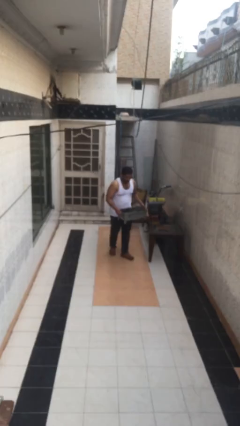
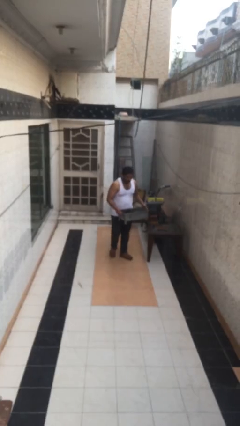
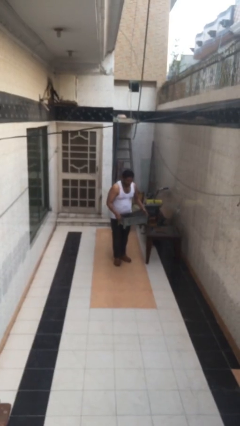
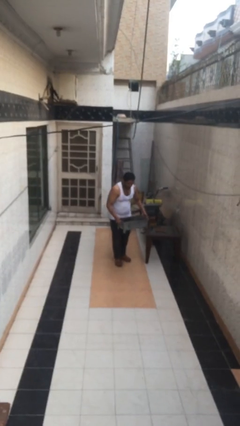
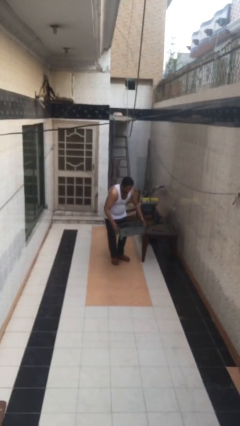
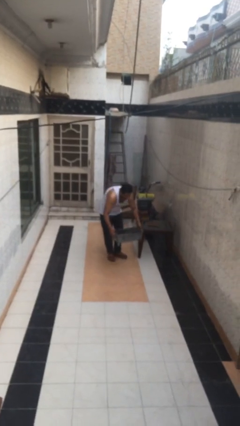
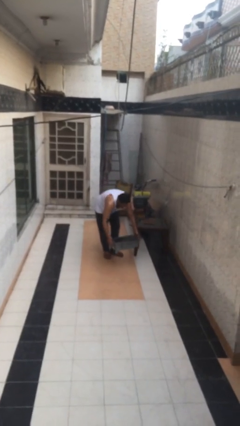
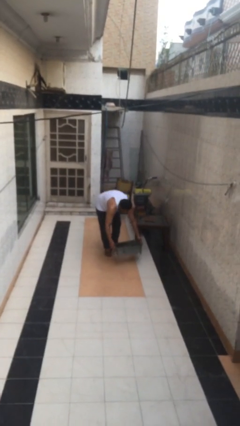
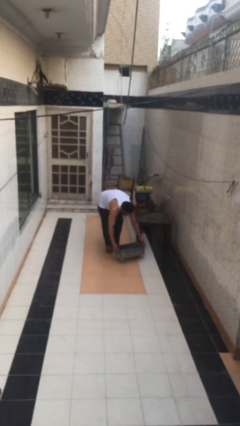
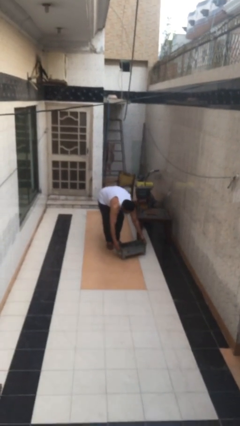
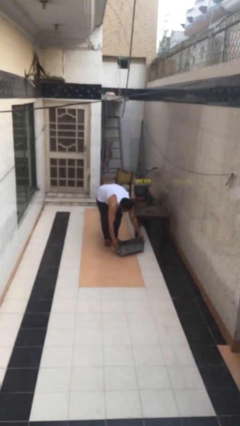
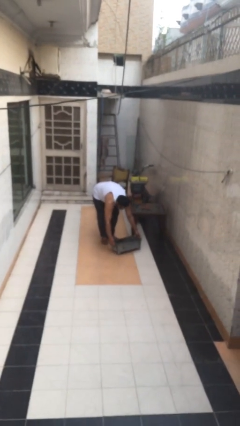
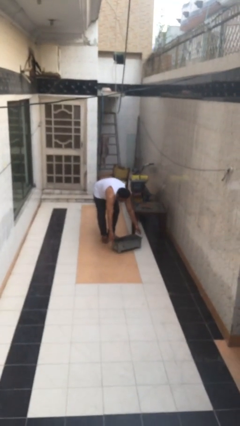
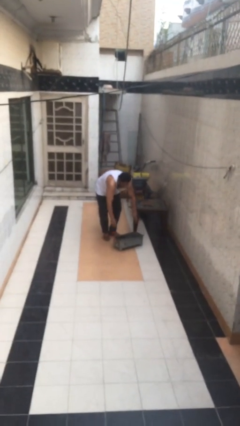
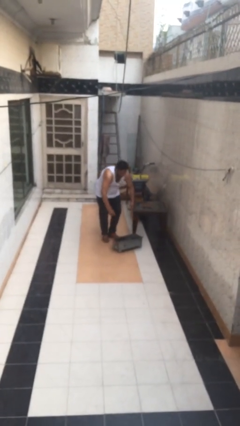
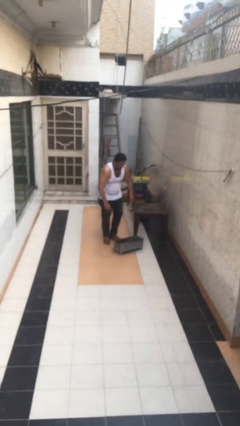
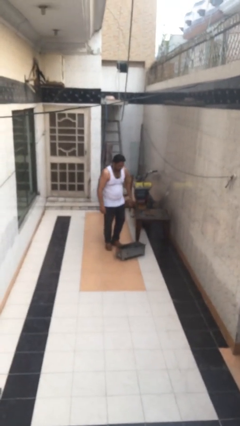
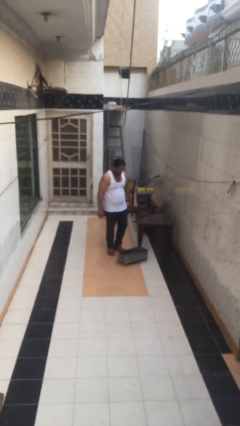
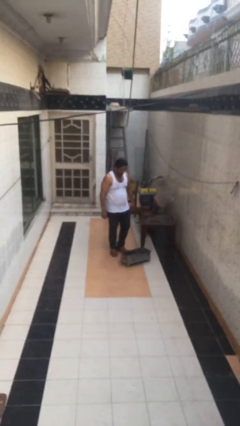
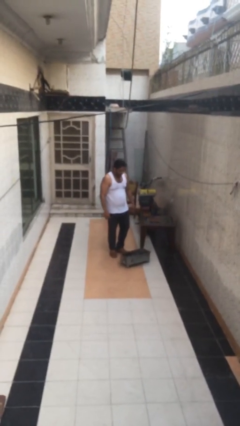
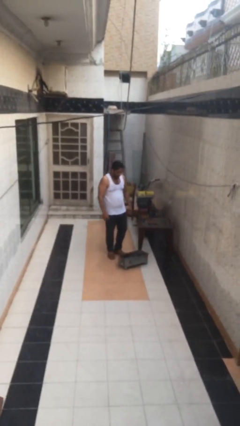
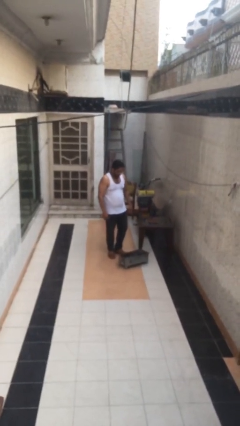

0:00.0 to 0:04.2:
person puts down object on floor

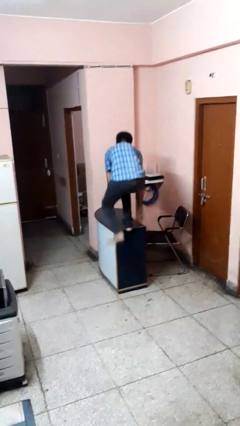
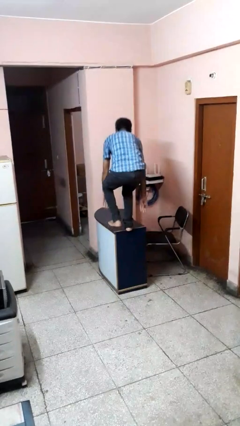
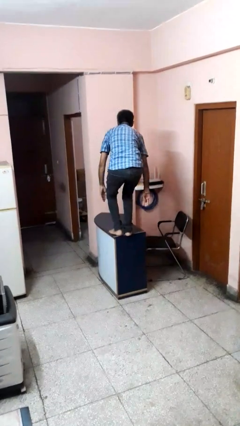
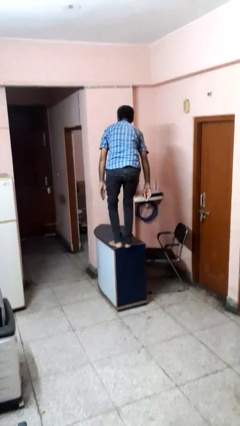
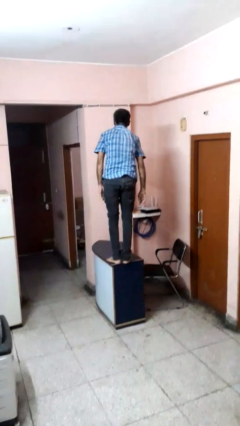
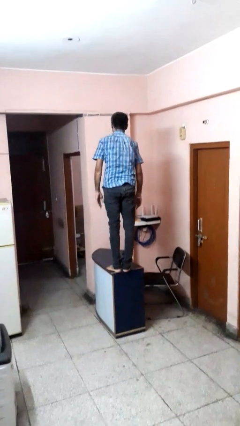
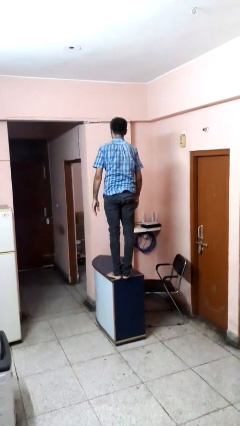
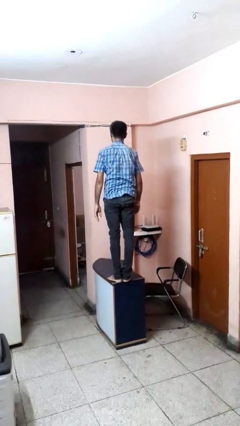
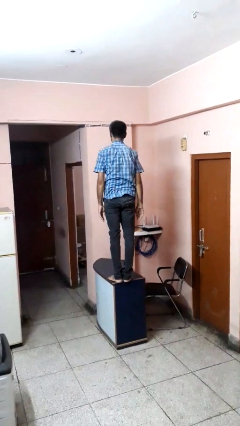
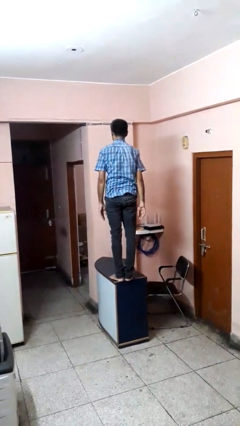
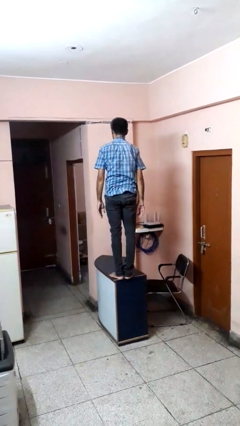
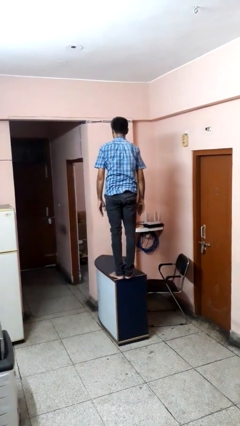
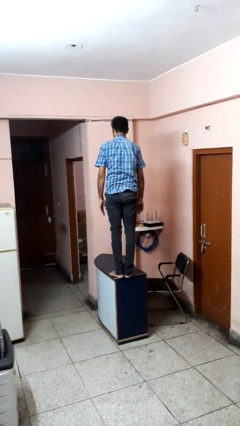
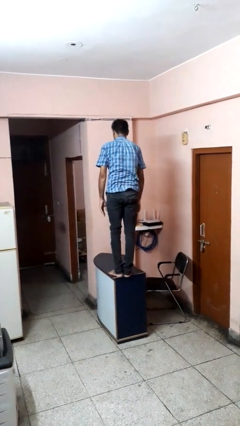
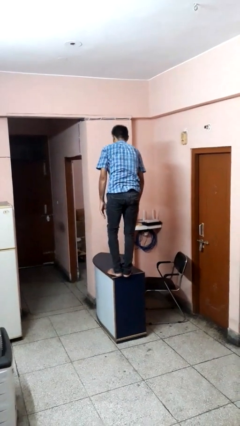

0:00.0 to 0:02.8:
person climbs on table

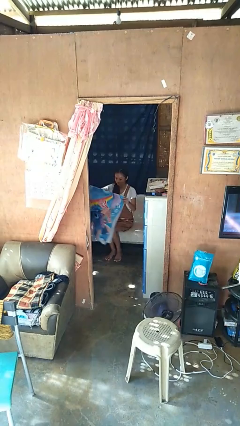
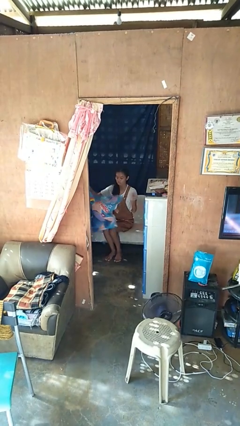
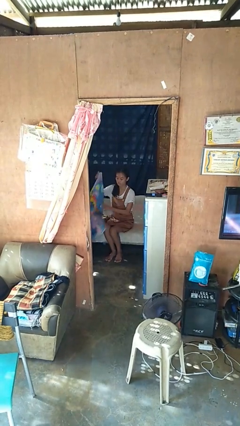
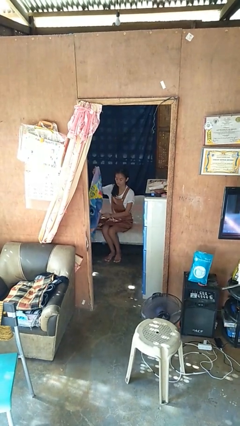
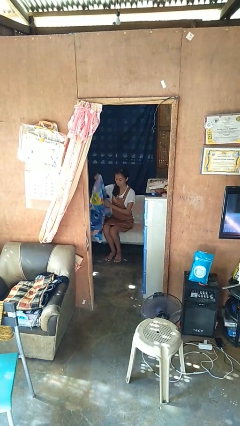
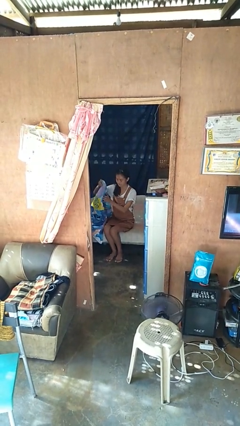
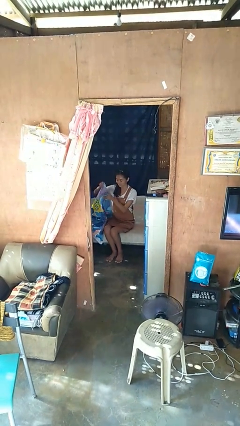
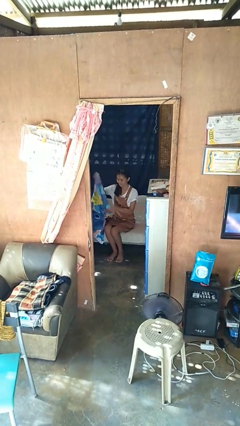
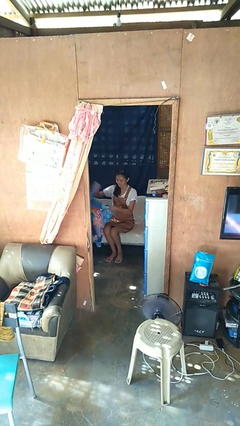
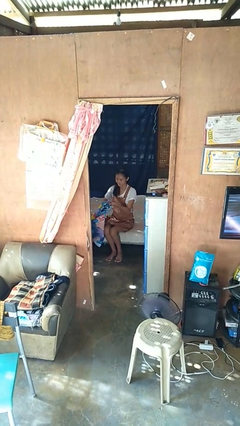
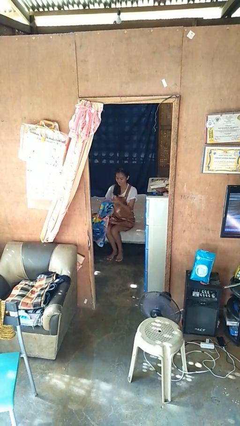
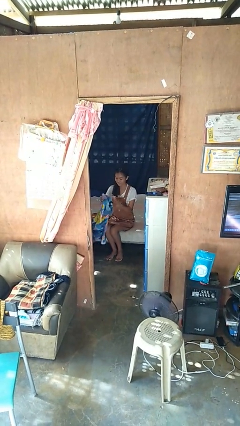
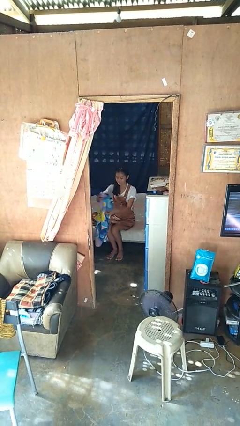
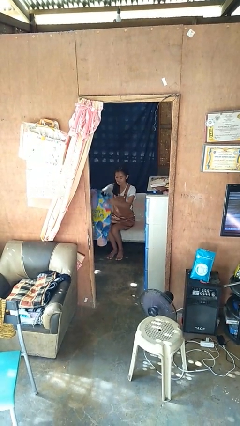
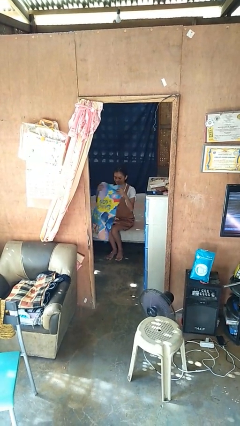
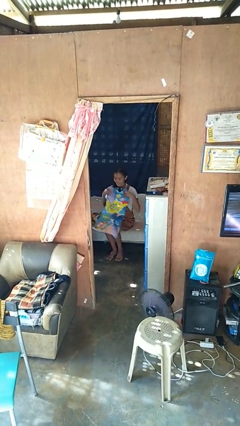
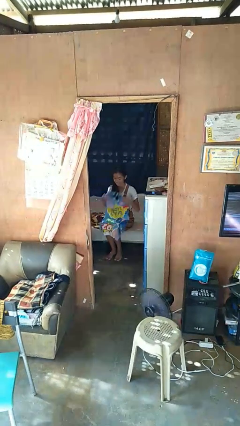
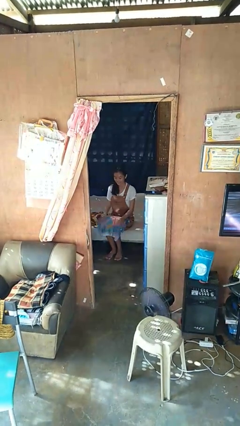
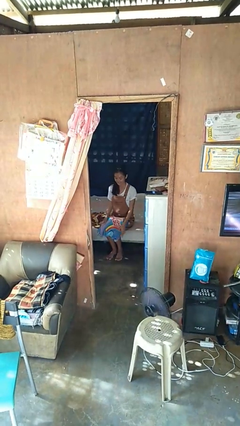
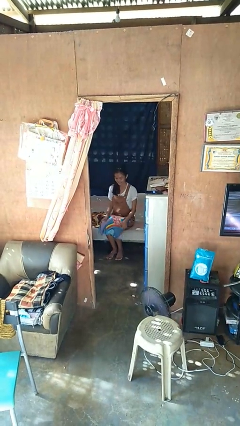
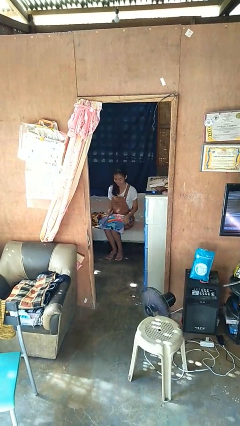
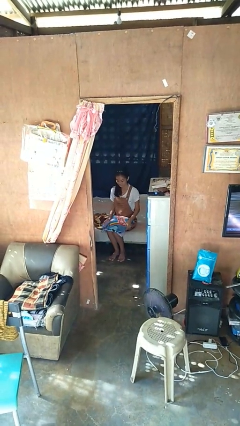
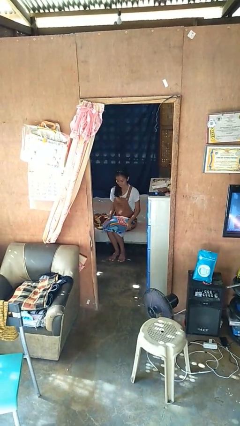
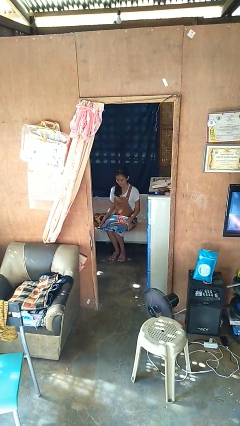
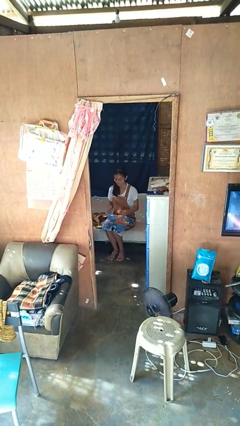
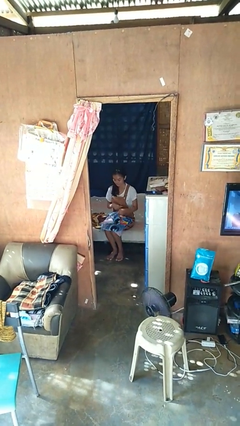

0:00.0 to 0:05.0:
person folds blanket

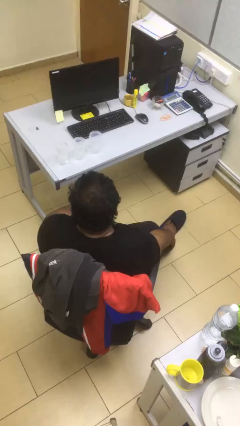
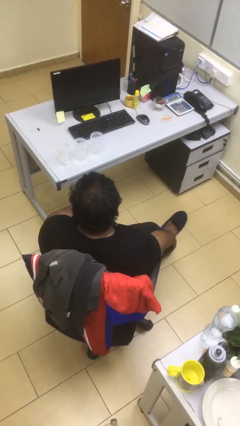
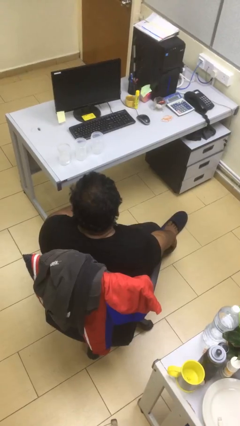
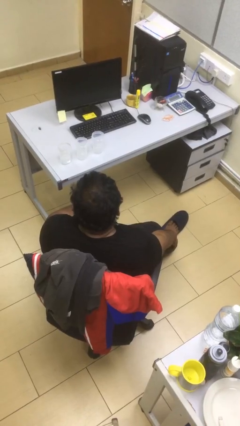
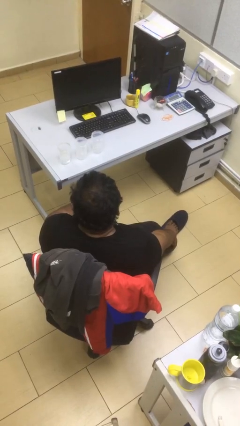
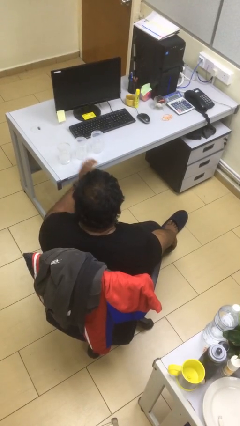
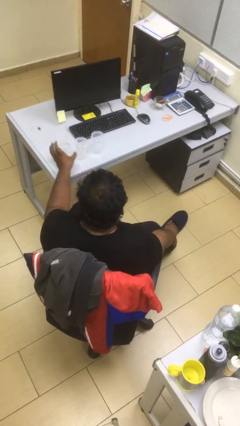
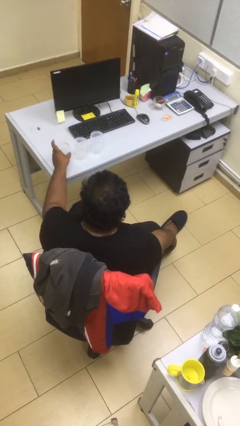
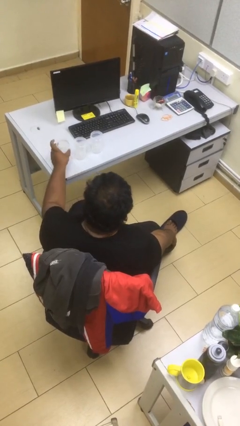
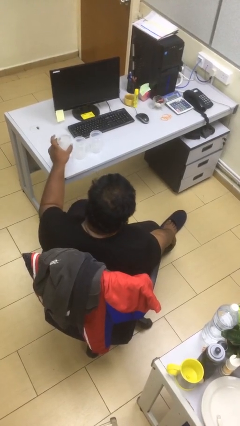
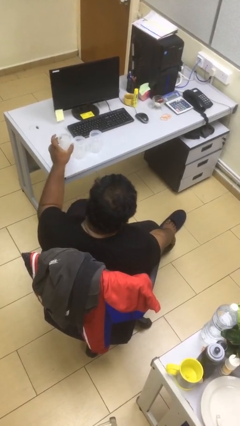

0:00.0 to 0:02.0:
person picks up object from table

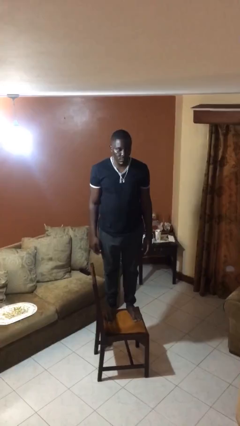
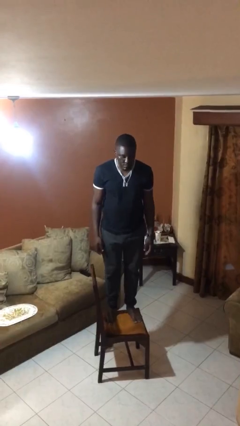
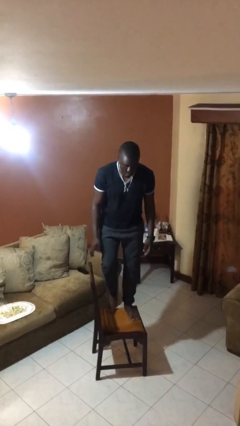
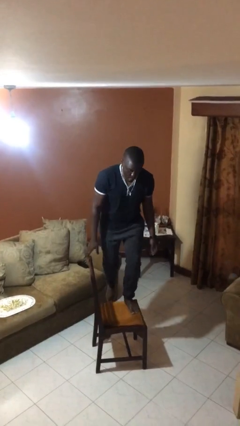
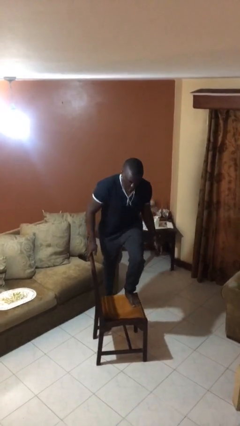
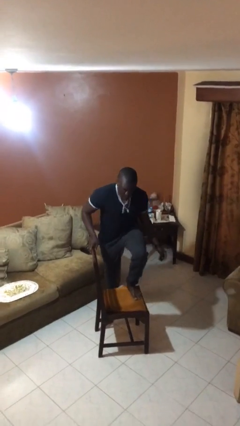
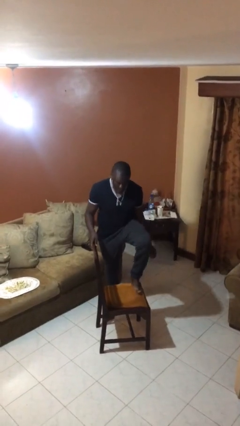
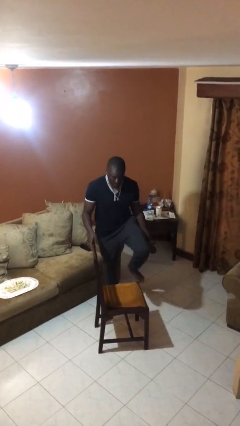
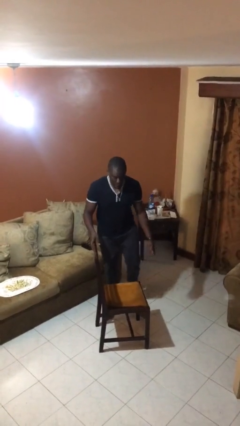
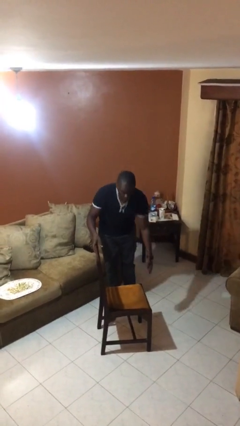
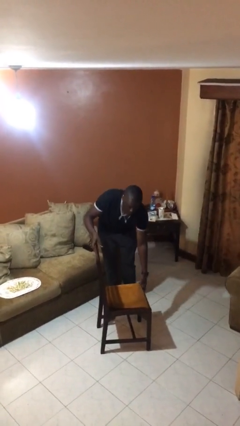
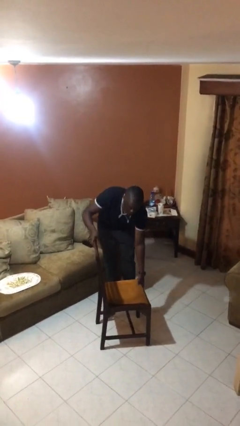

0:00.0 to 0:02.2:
person climbs off chair

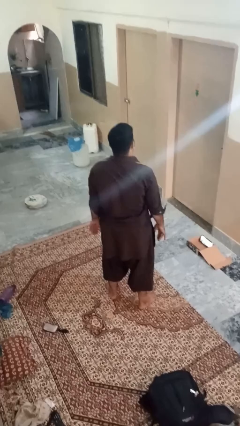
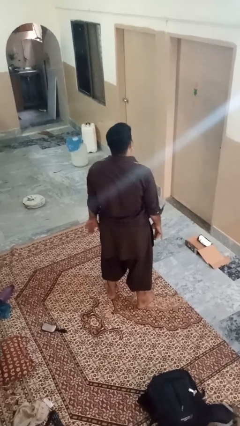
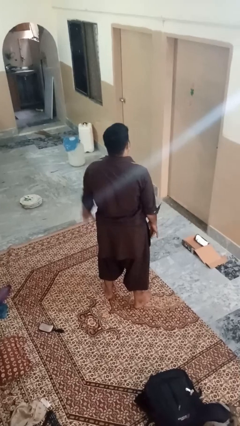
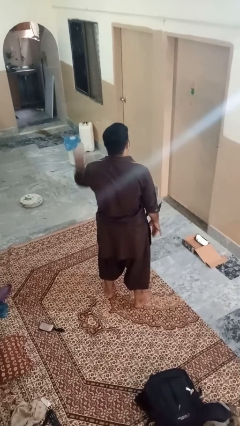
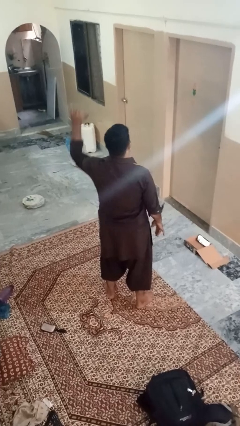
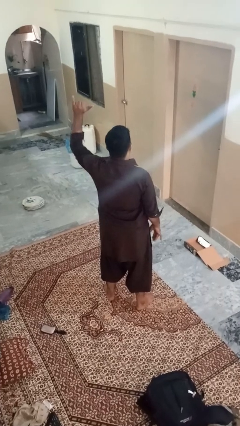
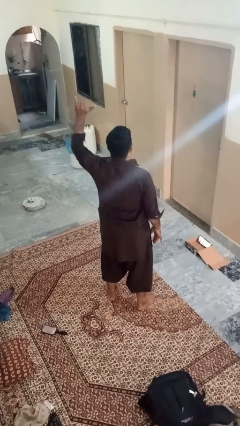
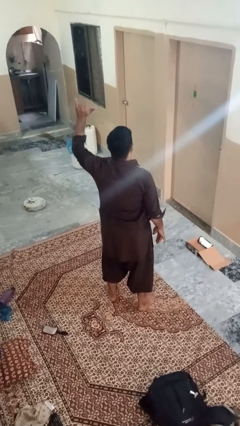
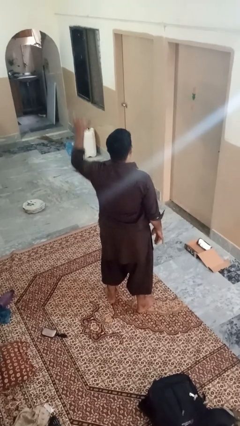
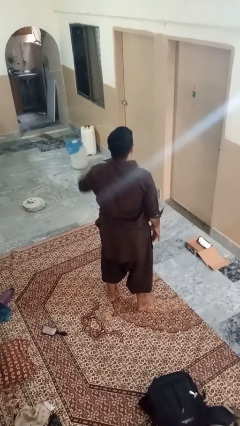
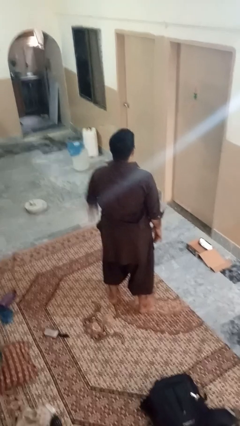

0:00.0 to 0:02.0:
person gestures hang loose
